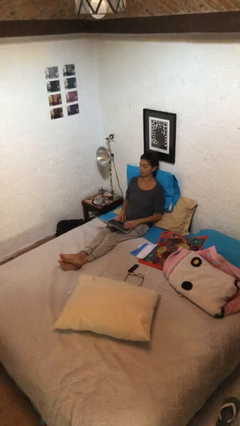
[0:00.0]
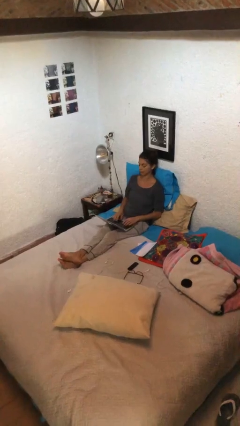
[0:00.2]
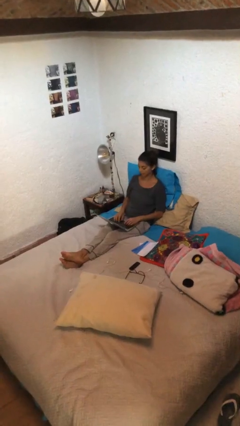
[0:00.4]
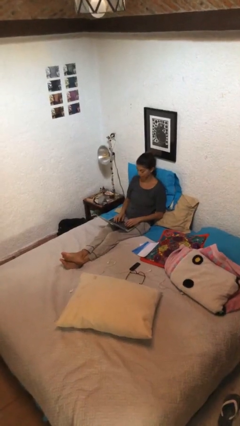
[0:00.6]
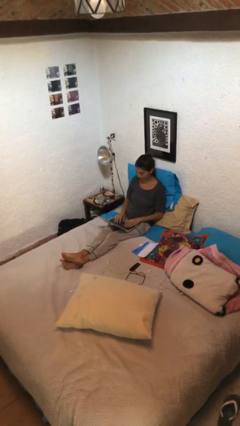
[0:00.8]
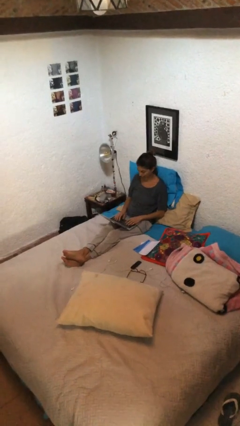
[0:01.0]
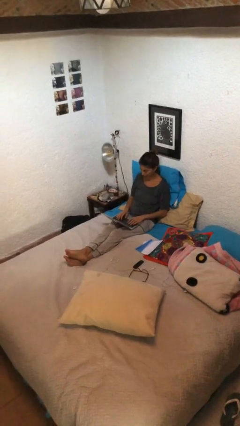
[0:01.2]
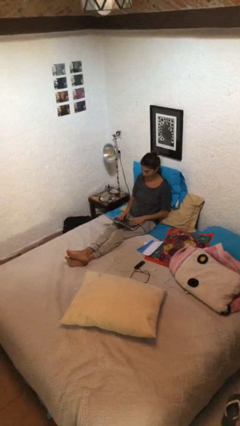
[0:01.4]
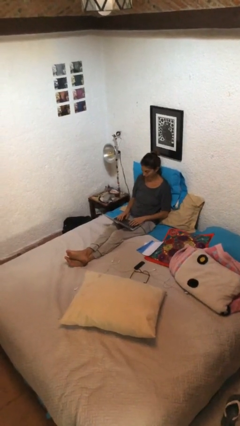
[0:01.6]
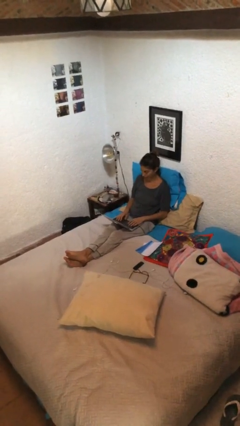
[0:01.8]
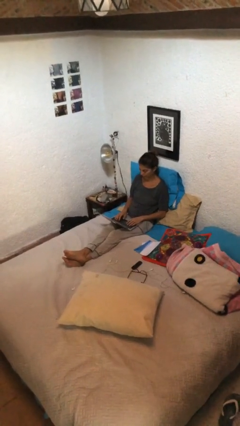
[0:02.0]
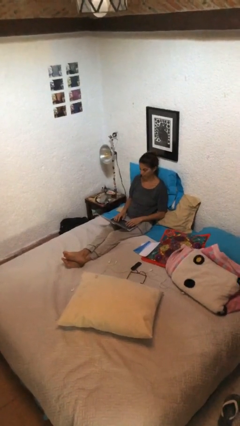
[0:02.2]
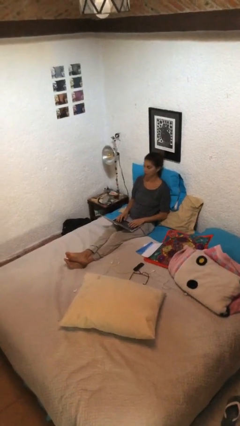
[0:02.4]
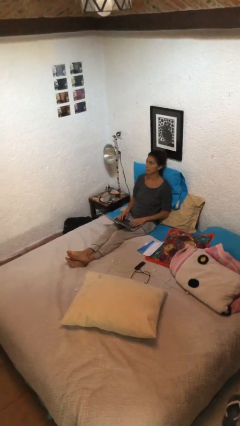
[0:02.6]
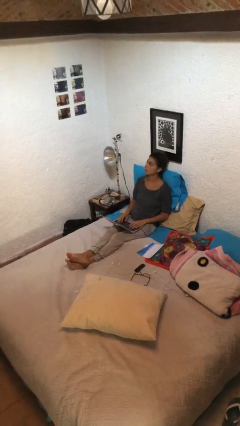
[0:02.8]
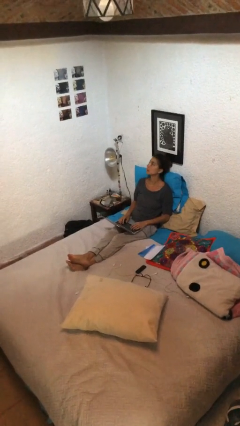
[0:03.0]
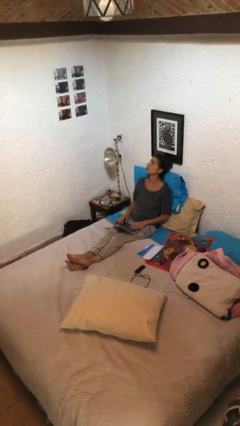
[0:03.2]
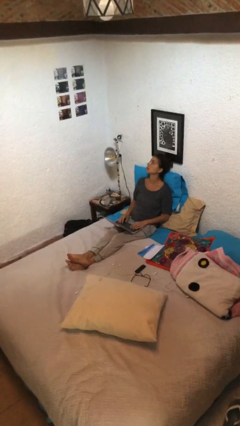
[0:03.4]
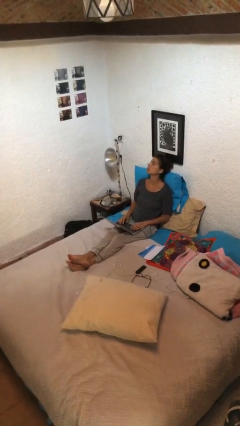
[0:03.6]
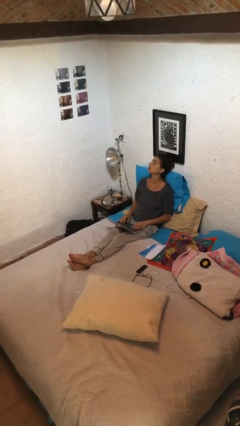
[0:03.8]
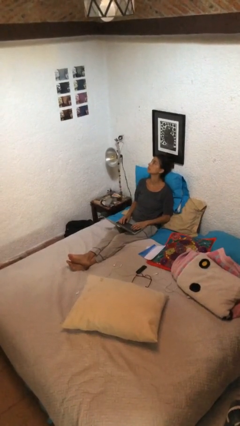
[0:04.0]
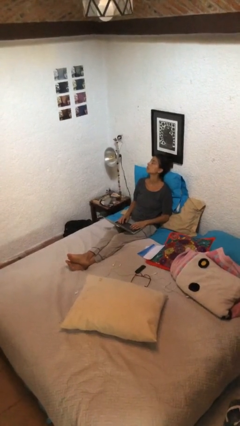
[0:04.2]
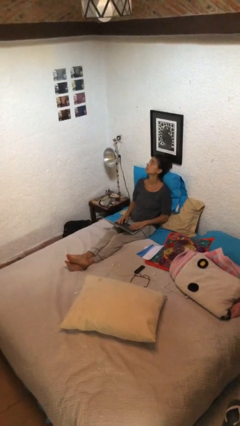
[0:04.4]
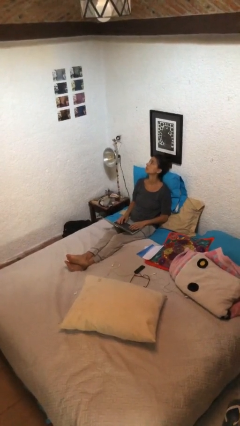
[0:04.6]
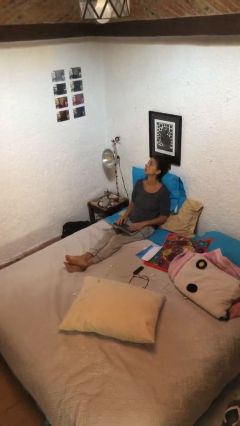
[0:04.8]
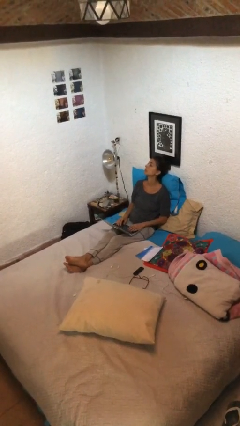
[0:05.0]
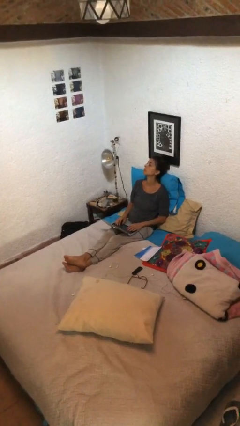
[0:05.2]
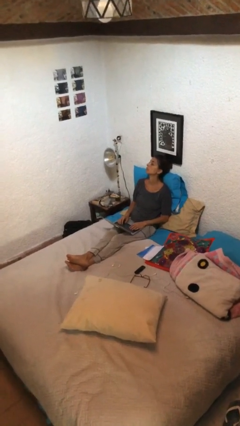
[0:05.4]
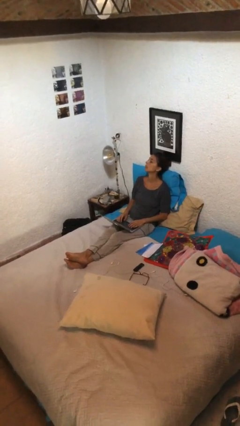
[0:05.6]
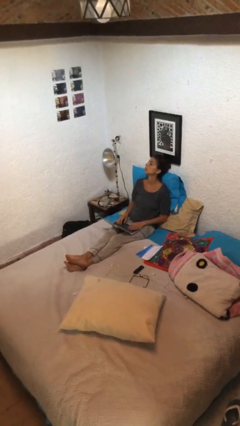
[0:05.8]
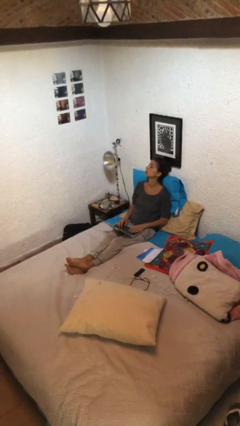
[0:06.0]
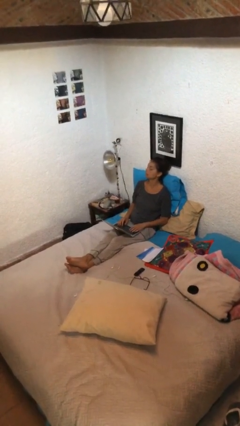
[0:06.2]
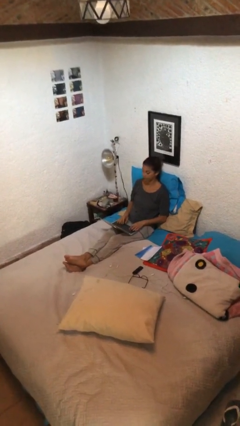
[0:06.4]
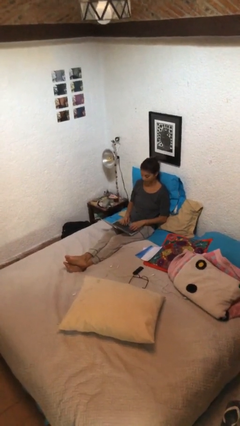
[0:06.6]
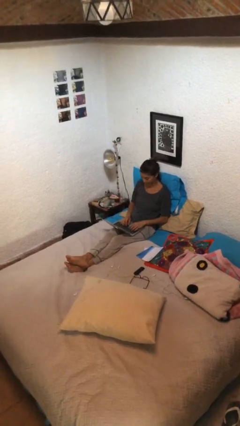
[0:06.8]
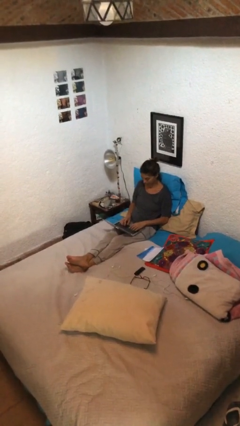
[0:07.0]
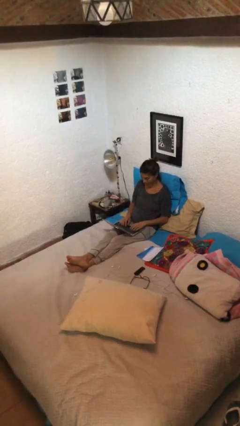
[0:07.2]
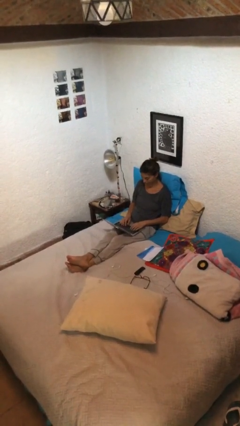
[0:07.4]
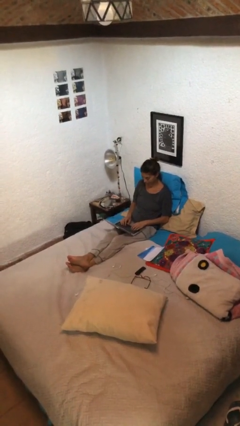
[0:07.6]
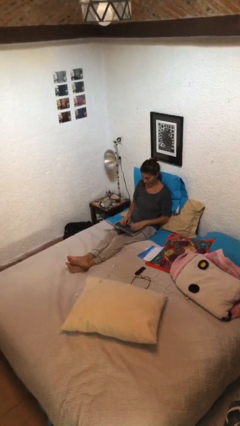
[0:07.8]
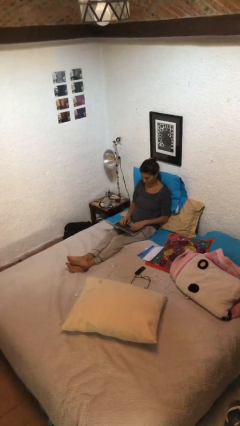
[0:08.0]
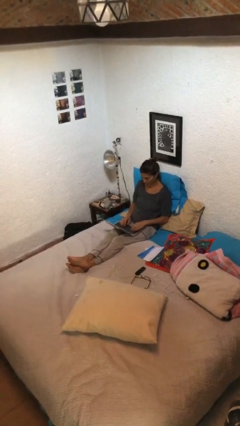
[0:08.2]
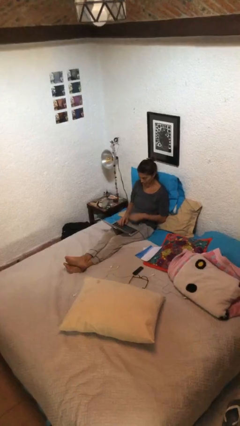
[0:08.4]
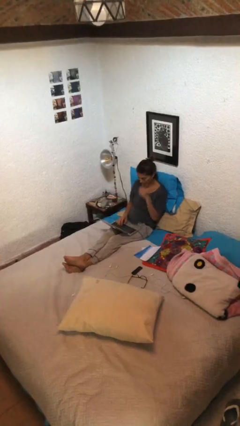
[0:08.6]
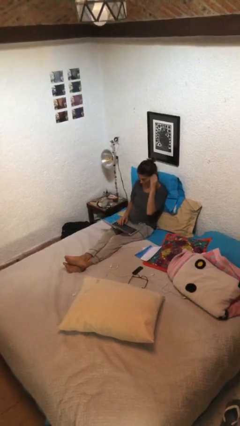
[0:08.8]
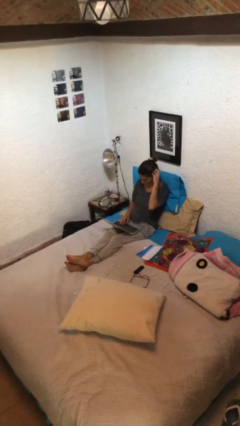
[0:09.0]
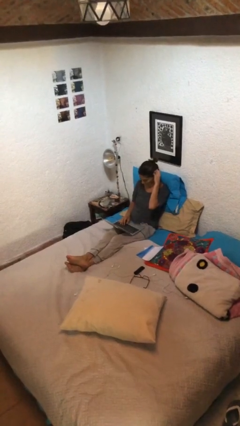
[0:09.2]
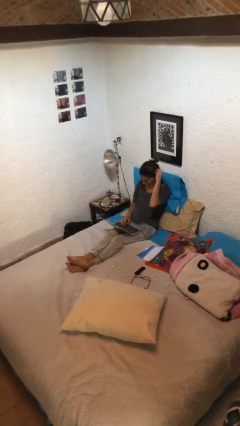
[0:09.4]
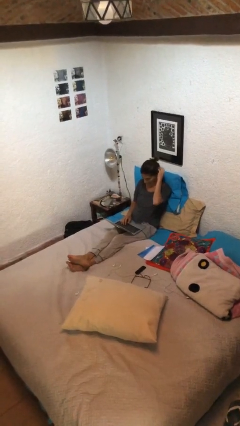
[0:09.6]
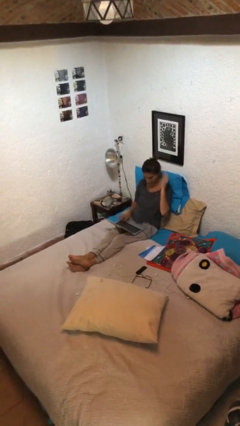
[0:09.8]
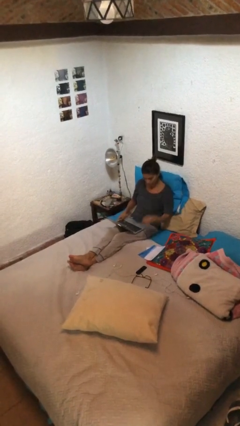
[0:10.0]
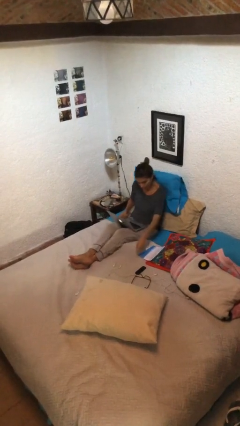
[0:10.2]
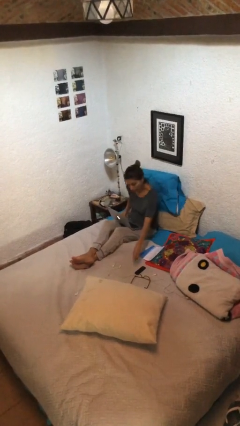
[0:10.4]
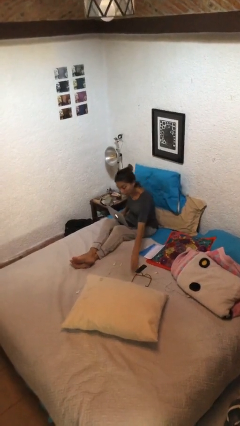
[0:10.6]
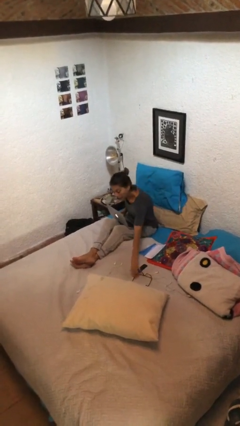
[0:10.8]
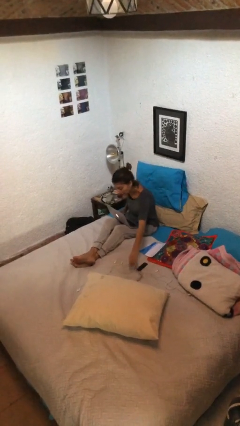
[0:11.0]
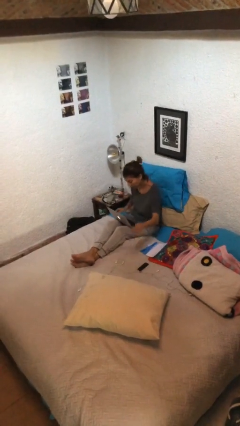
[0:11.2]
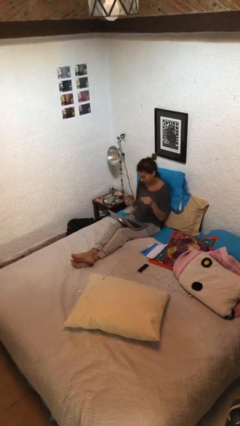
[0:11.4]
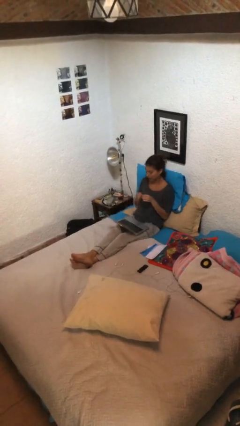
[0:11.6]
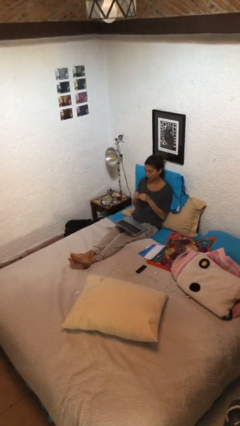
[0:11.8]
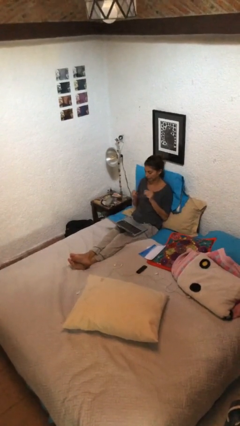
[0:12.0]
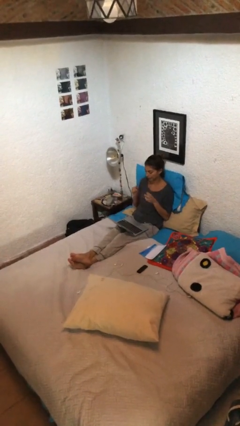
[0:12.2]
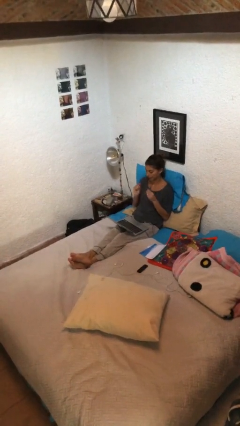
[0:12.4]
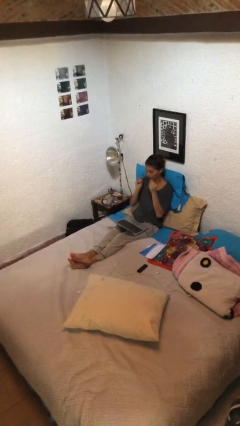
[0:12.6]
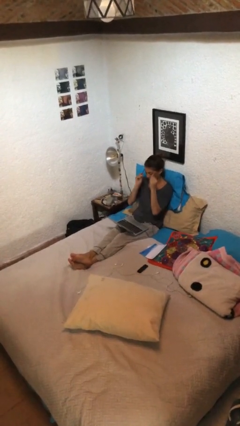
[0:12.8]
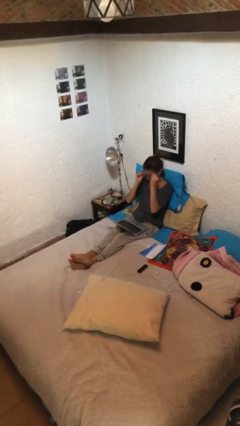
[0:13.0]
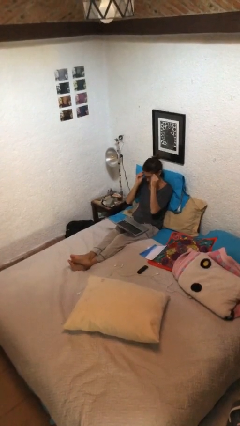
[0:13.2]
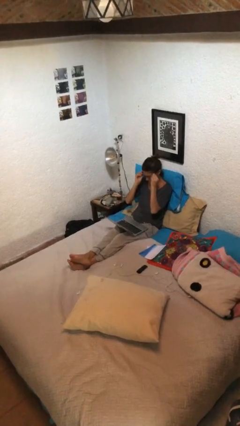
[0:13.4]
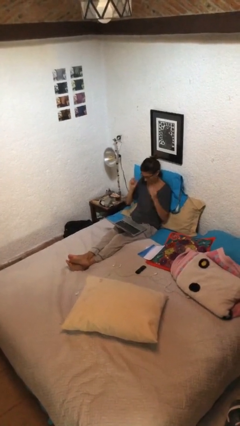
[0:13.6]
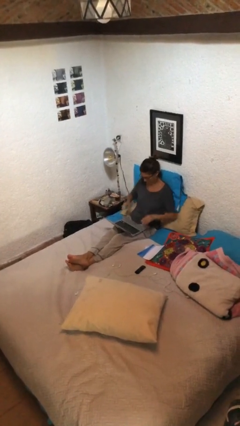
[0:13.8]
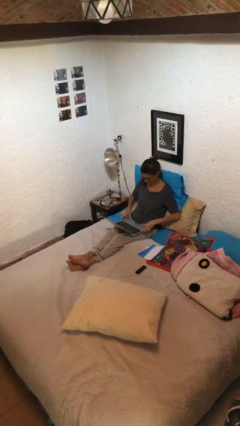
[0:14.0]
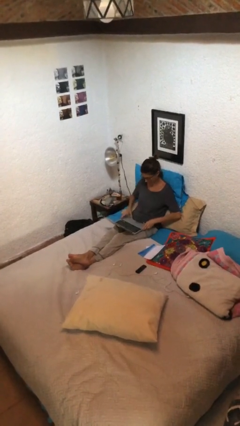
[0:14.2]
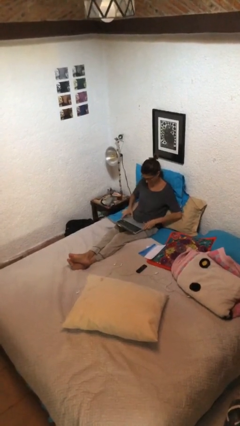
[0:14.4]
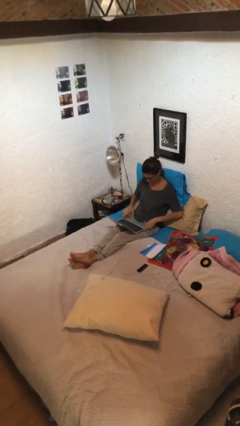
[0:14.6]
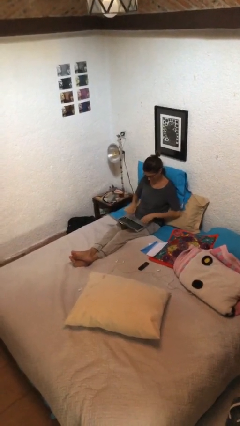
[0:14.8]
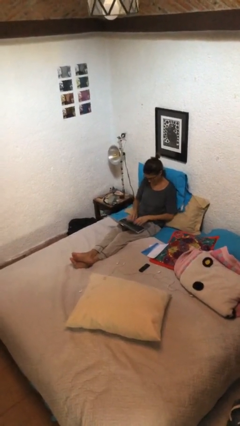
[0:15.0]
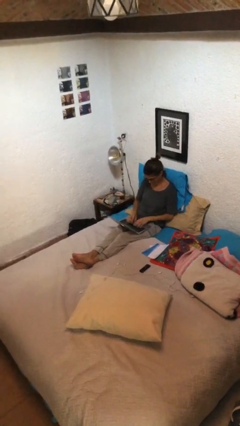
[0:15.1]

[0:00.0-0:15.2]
person interacts with laptop

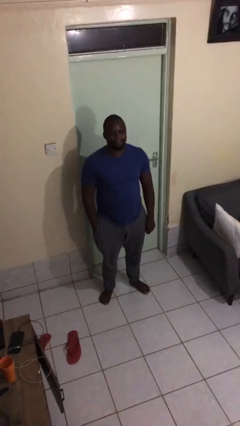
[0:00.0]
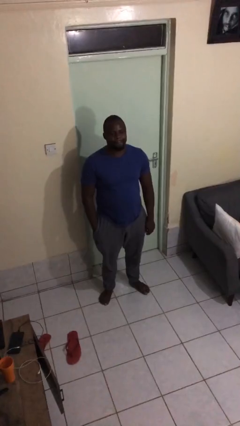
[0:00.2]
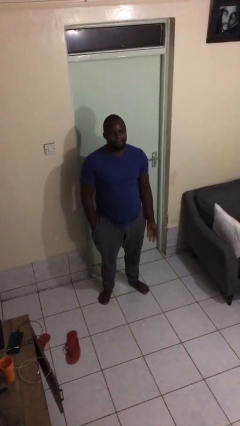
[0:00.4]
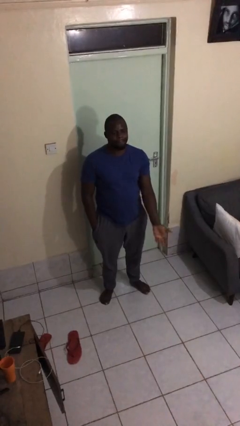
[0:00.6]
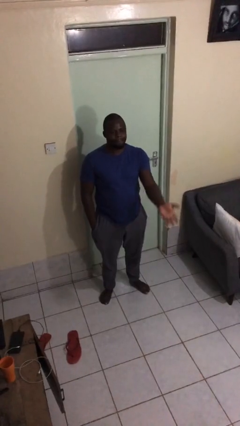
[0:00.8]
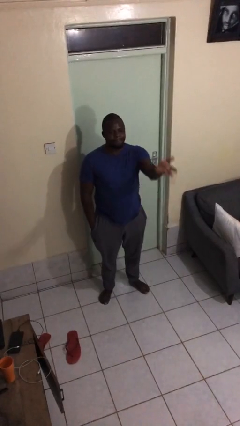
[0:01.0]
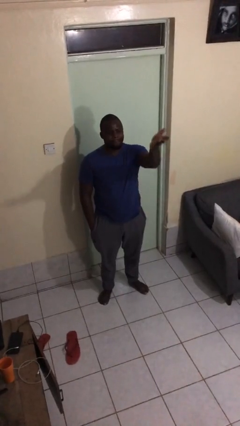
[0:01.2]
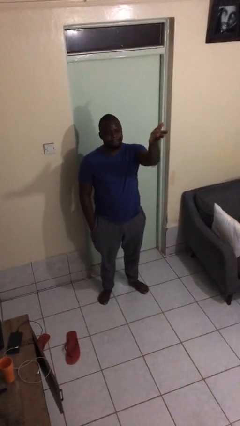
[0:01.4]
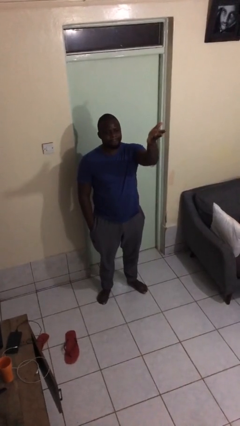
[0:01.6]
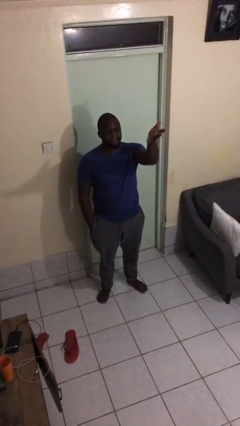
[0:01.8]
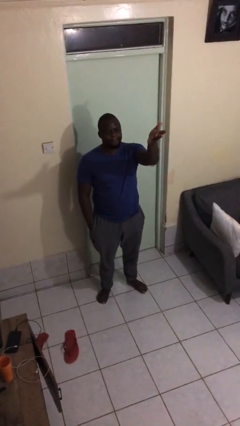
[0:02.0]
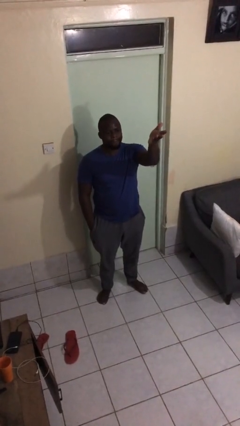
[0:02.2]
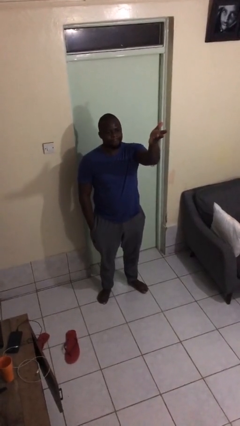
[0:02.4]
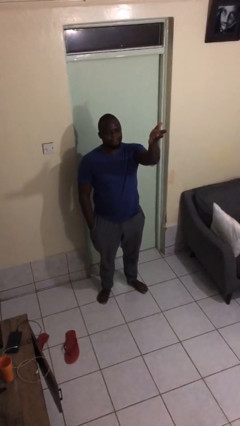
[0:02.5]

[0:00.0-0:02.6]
person gestures swipe up
